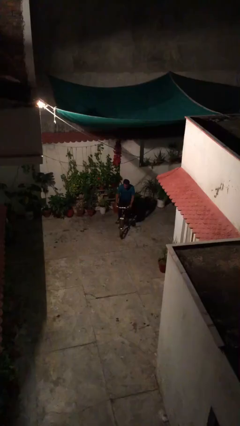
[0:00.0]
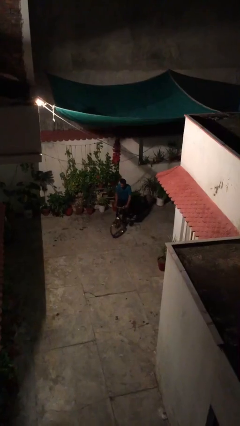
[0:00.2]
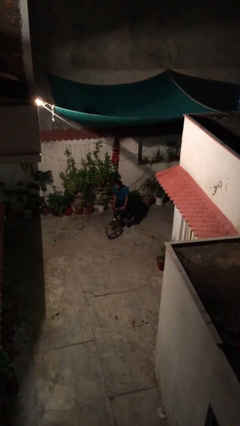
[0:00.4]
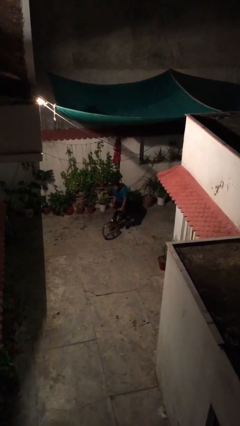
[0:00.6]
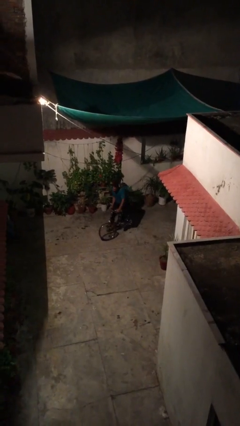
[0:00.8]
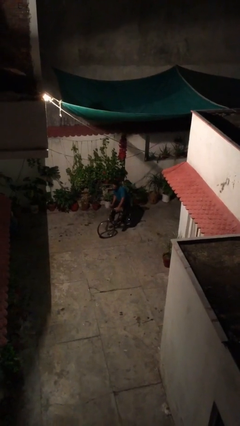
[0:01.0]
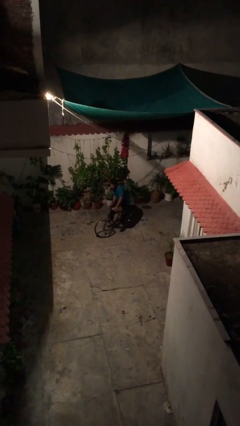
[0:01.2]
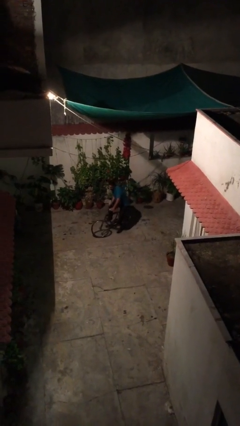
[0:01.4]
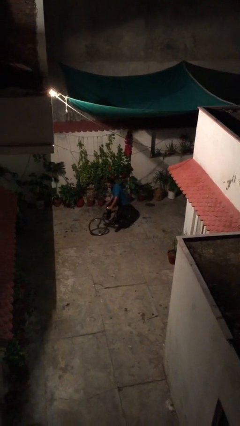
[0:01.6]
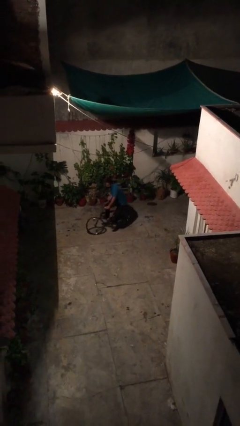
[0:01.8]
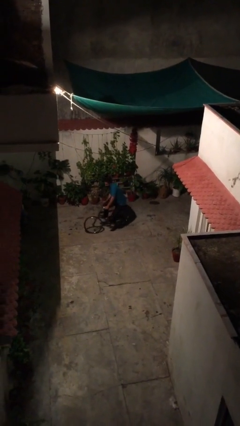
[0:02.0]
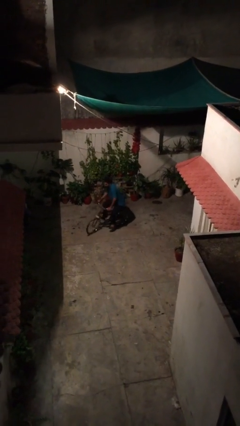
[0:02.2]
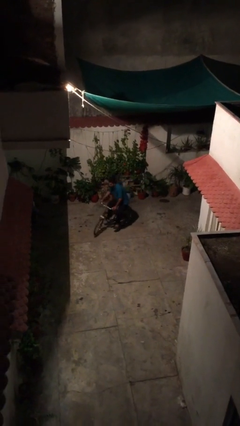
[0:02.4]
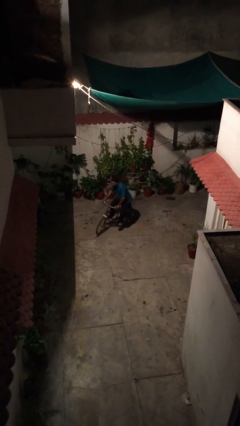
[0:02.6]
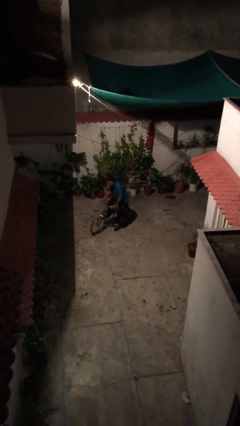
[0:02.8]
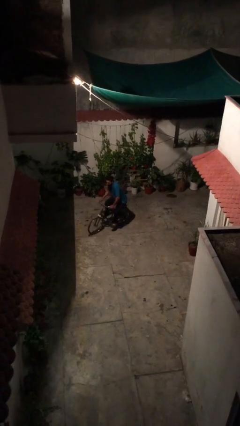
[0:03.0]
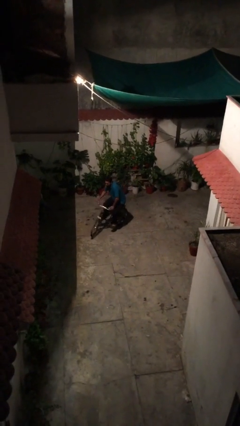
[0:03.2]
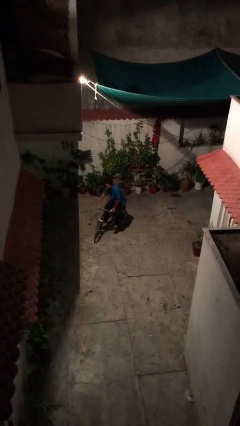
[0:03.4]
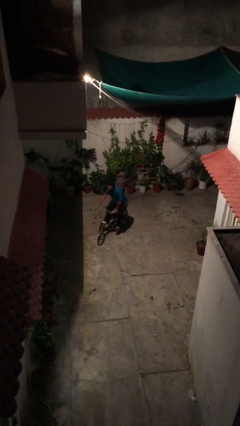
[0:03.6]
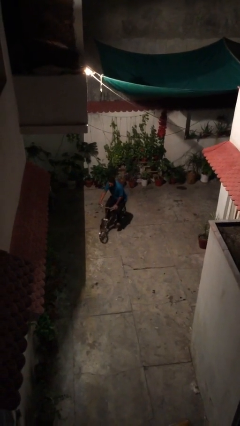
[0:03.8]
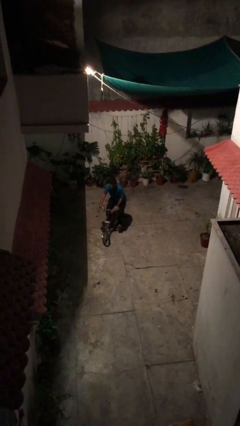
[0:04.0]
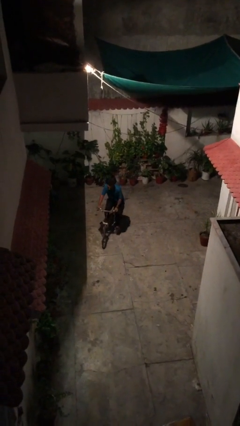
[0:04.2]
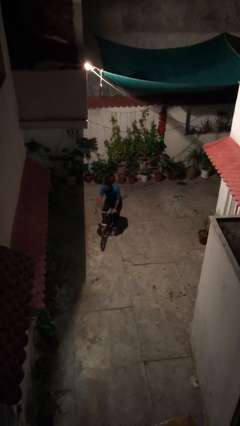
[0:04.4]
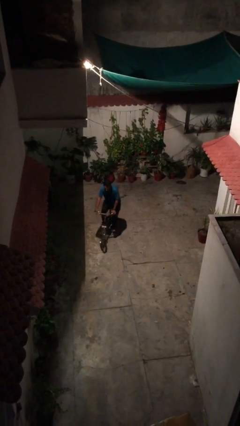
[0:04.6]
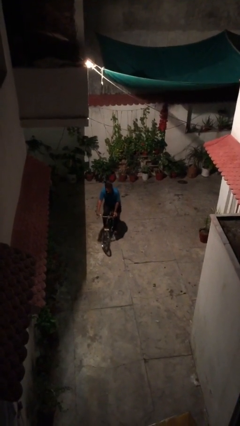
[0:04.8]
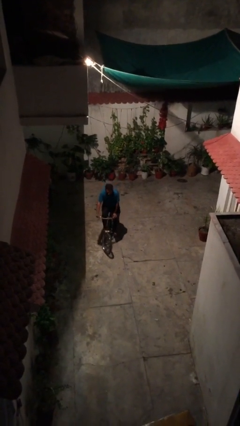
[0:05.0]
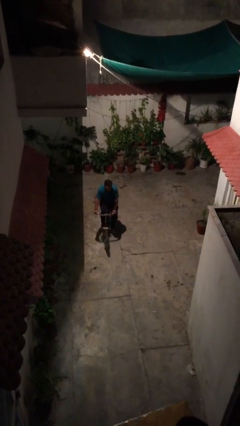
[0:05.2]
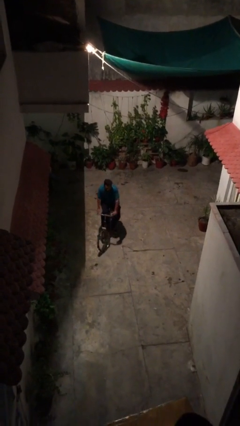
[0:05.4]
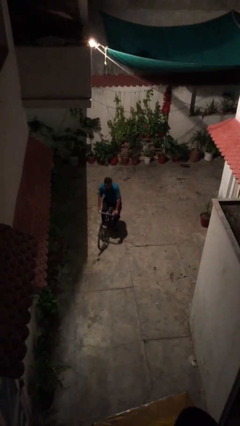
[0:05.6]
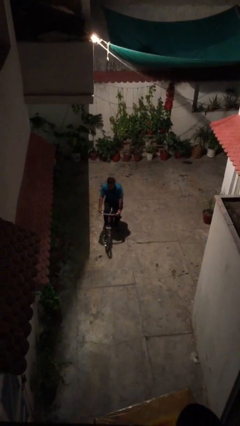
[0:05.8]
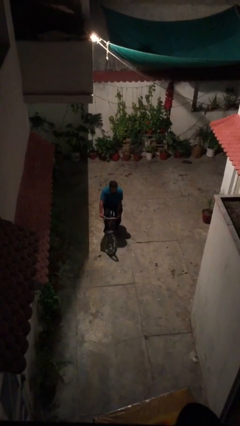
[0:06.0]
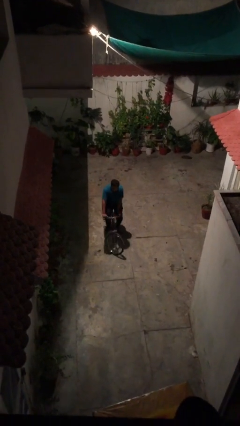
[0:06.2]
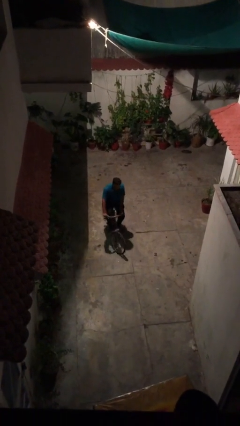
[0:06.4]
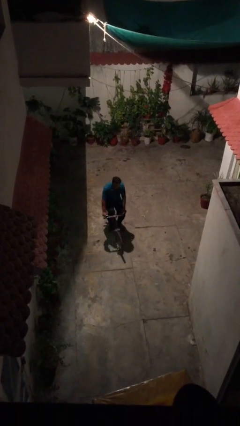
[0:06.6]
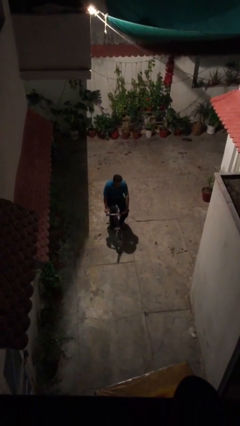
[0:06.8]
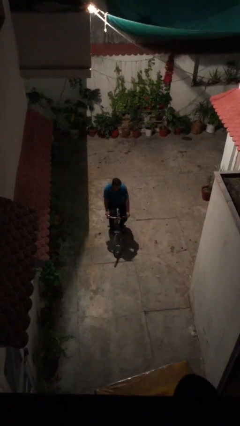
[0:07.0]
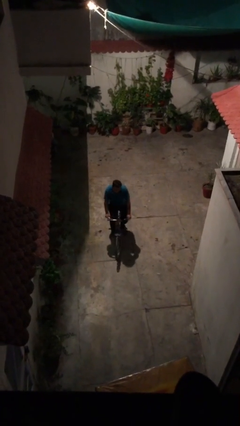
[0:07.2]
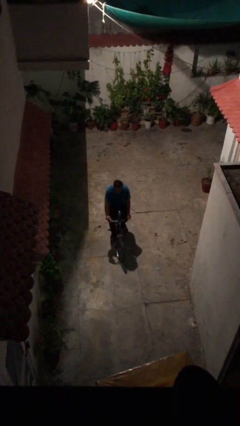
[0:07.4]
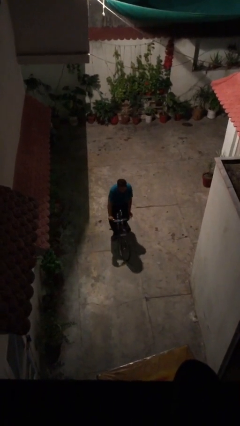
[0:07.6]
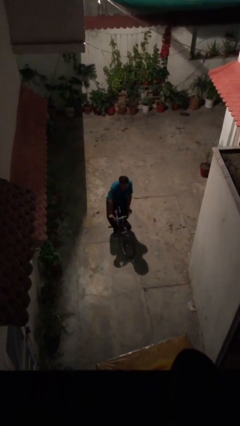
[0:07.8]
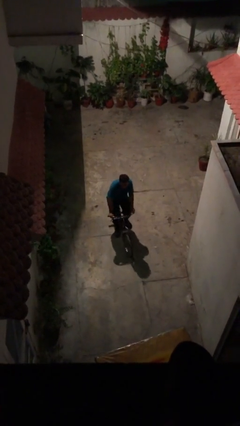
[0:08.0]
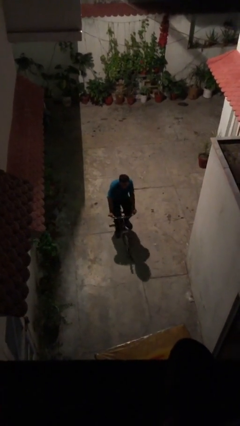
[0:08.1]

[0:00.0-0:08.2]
person rides bicycle

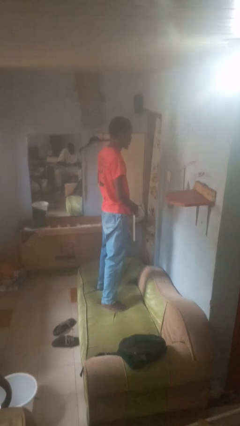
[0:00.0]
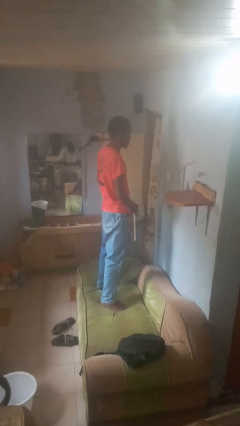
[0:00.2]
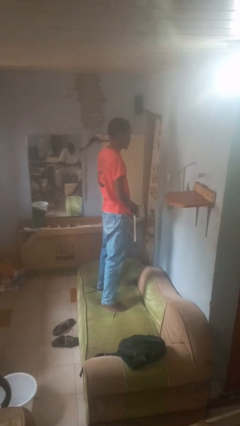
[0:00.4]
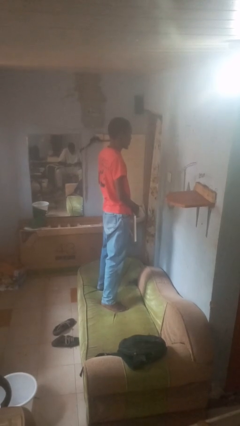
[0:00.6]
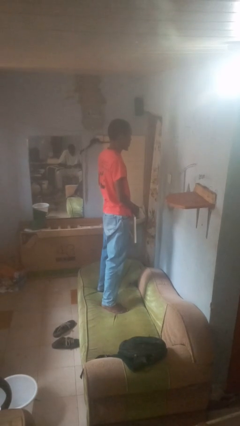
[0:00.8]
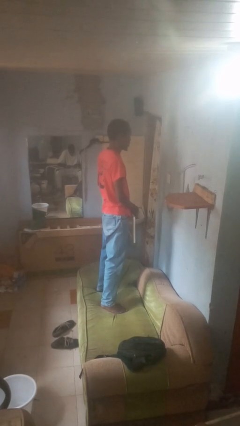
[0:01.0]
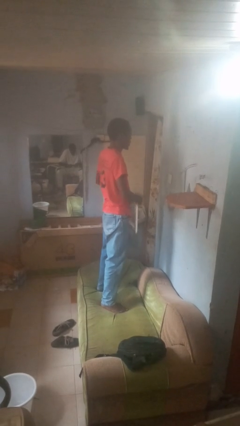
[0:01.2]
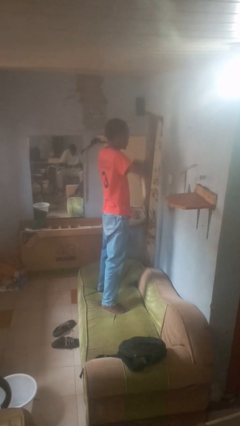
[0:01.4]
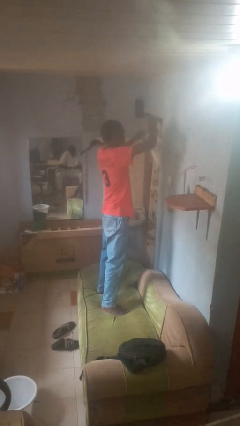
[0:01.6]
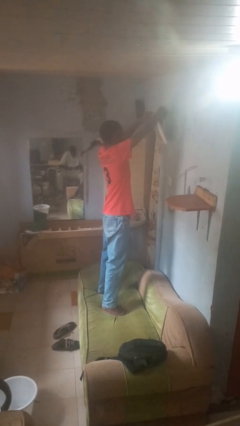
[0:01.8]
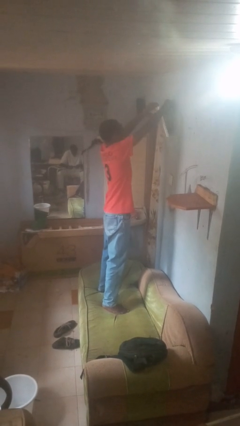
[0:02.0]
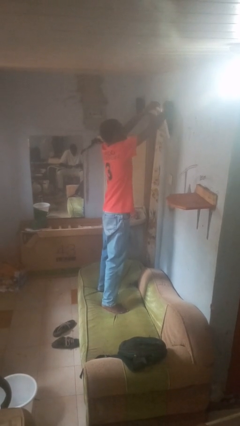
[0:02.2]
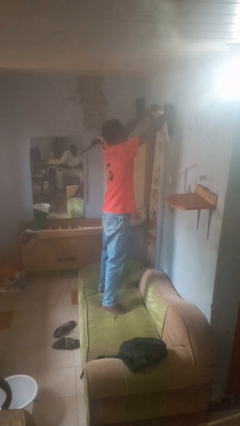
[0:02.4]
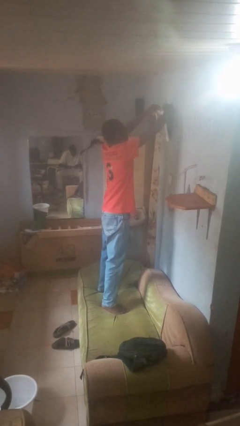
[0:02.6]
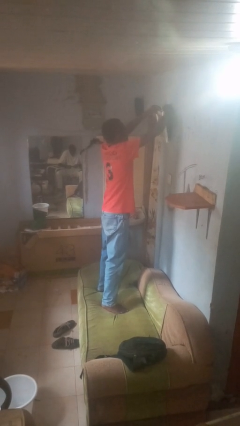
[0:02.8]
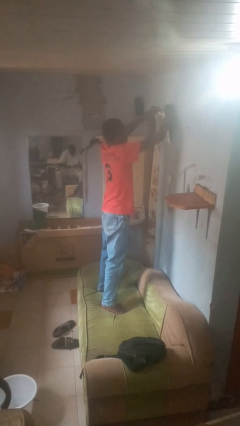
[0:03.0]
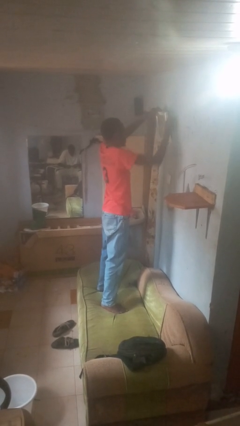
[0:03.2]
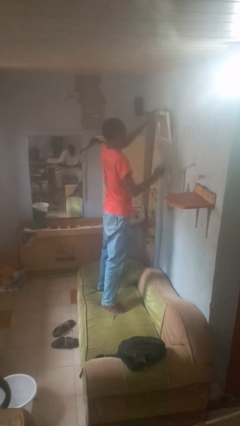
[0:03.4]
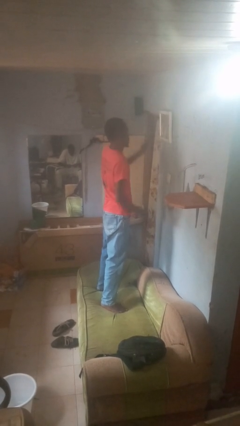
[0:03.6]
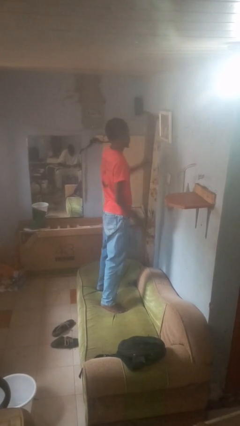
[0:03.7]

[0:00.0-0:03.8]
person puts up picture frame

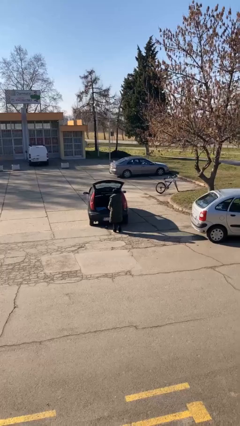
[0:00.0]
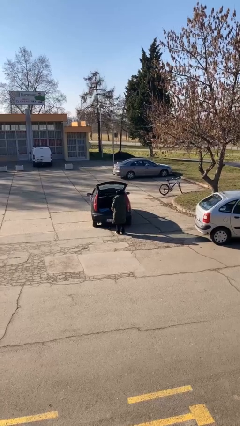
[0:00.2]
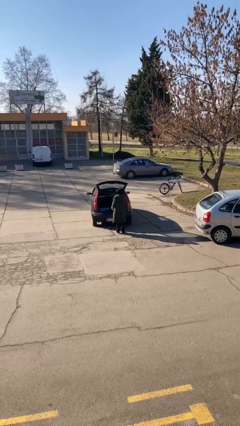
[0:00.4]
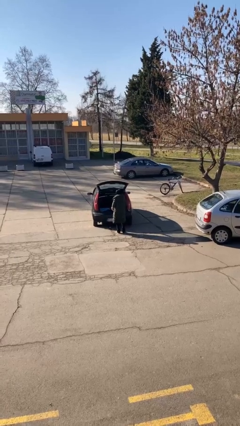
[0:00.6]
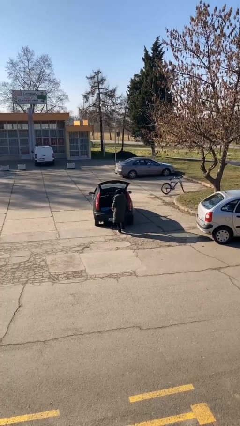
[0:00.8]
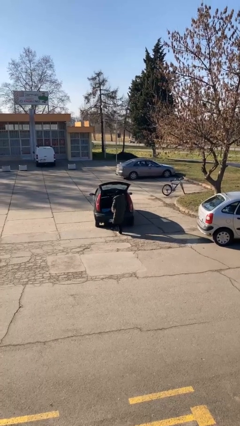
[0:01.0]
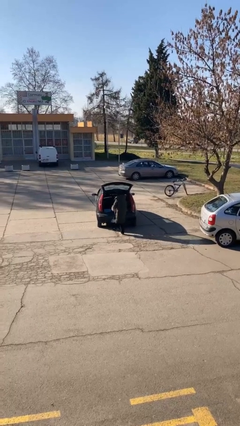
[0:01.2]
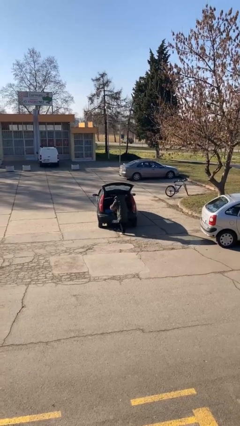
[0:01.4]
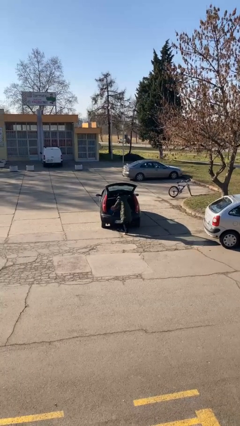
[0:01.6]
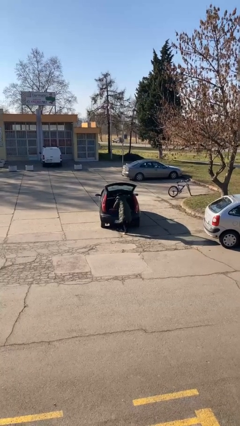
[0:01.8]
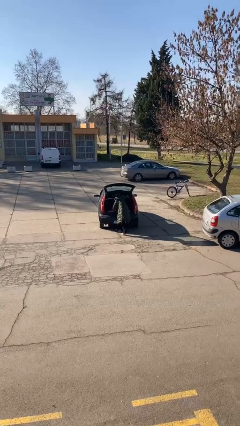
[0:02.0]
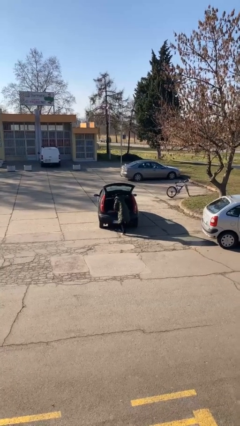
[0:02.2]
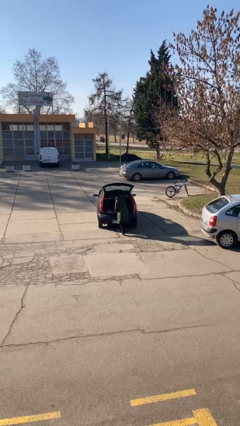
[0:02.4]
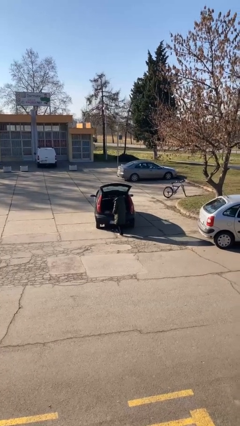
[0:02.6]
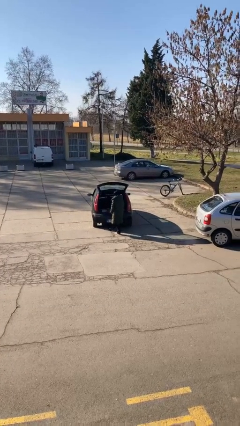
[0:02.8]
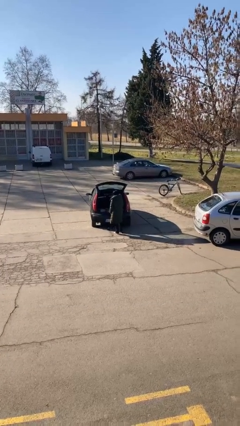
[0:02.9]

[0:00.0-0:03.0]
person loads car

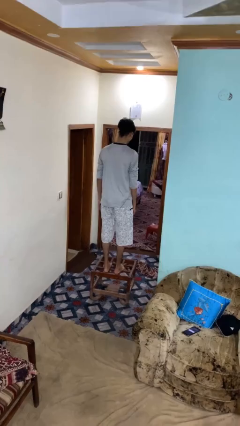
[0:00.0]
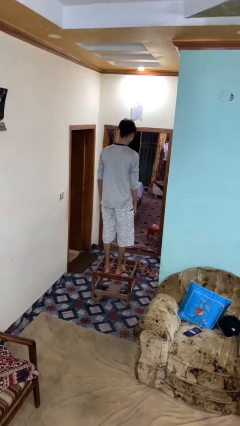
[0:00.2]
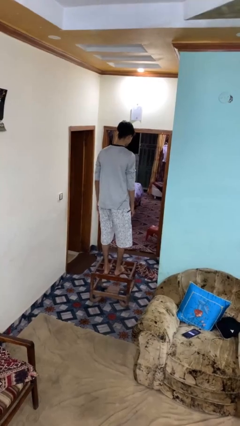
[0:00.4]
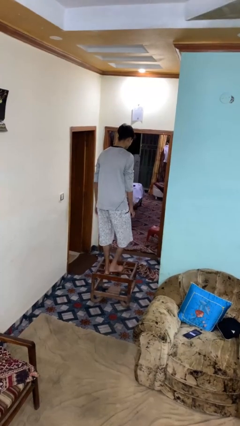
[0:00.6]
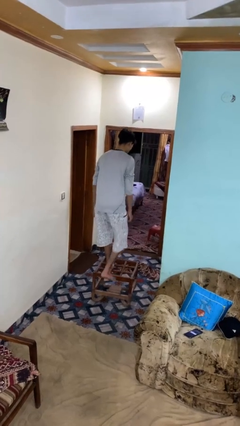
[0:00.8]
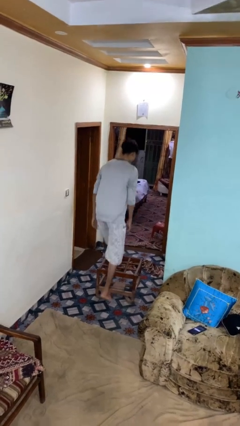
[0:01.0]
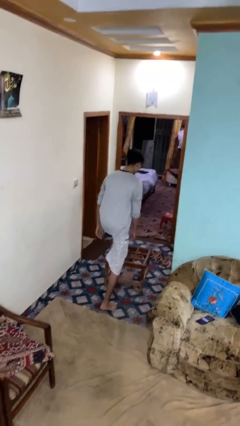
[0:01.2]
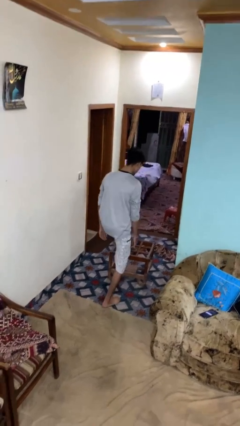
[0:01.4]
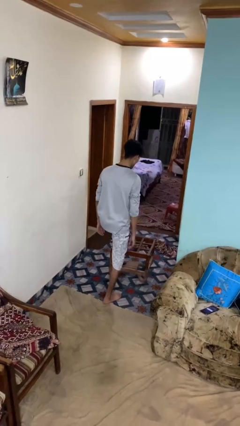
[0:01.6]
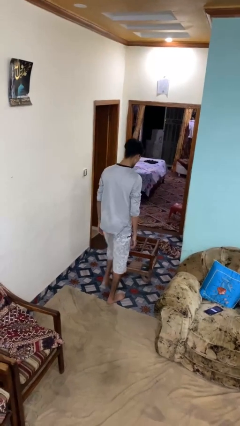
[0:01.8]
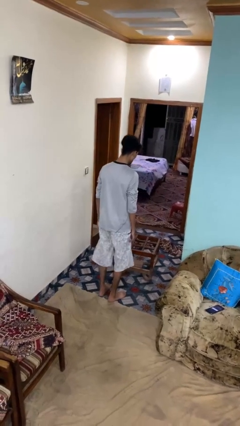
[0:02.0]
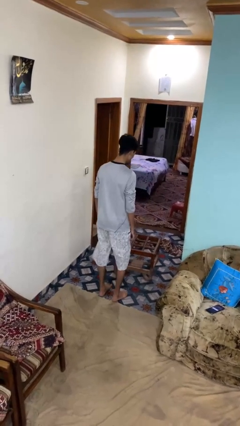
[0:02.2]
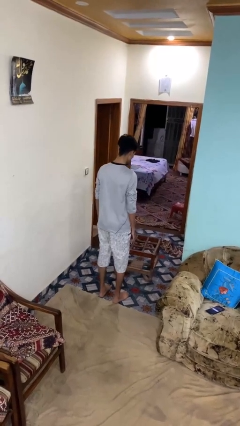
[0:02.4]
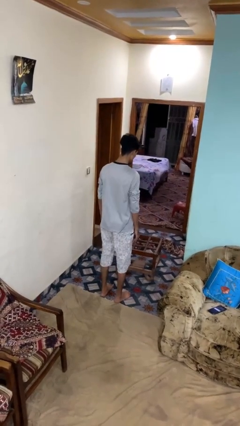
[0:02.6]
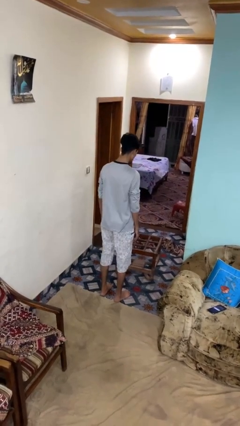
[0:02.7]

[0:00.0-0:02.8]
person climbs off table
